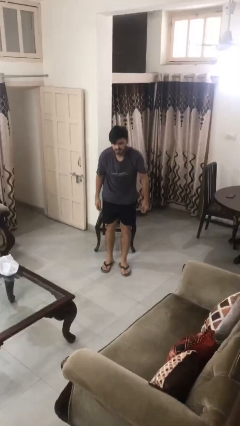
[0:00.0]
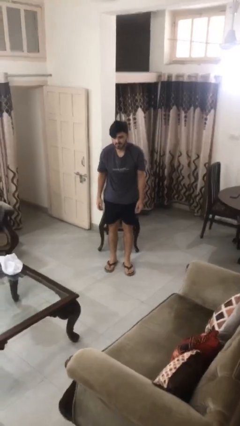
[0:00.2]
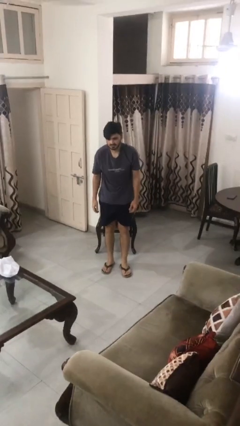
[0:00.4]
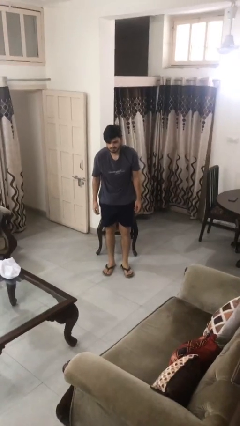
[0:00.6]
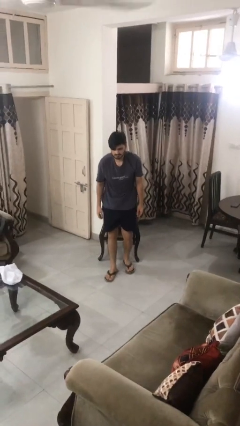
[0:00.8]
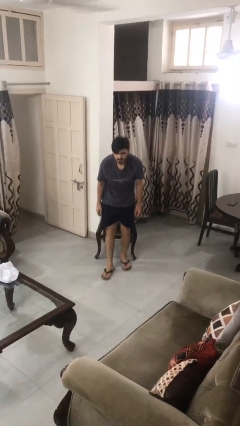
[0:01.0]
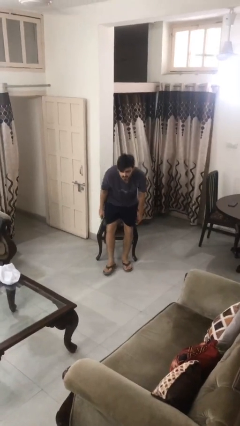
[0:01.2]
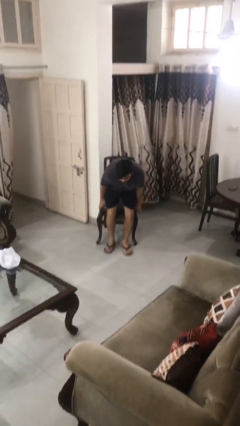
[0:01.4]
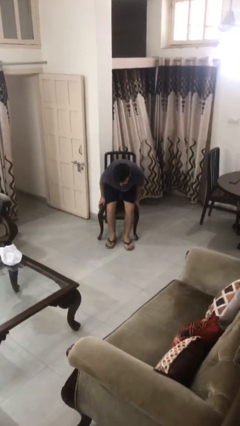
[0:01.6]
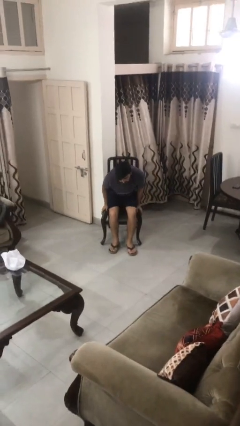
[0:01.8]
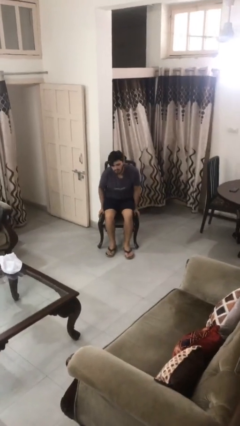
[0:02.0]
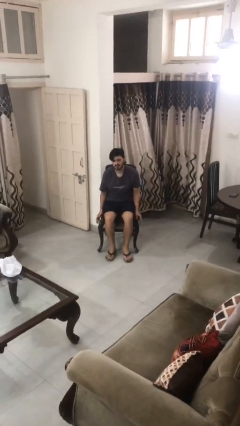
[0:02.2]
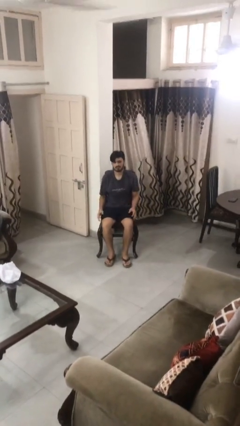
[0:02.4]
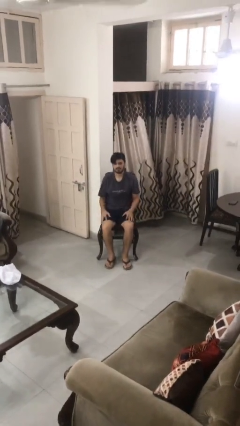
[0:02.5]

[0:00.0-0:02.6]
person sits down

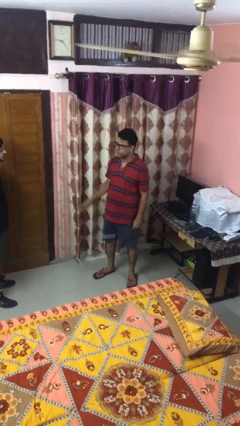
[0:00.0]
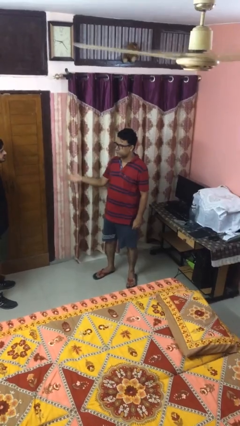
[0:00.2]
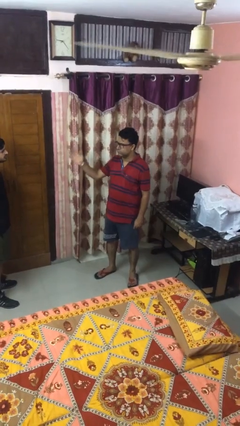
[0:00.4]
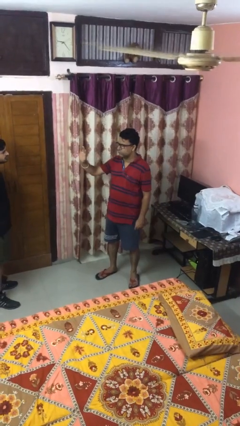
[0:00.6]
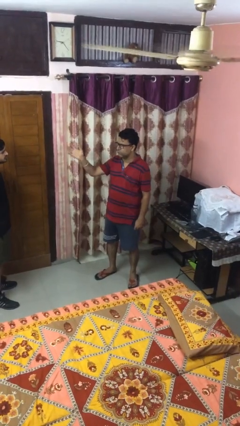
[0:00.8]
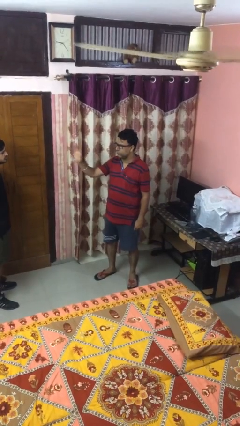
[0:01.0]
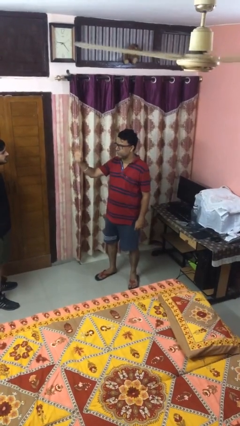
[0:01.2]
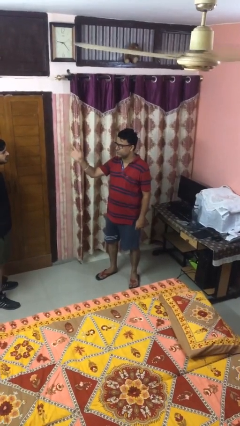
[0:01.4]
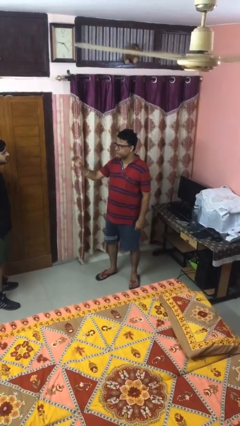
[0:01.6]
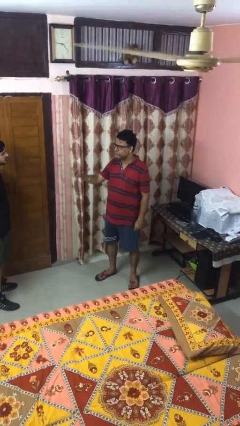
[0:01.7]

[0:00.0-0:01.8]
person waves at person

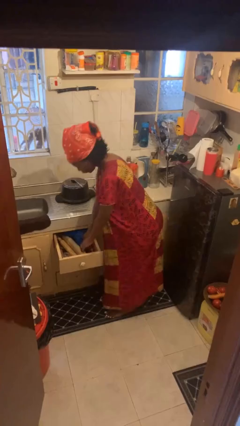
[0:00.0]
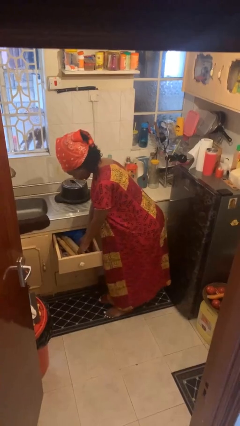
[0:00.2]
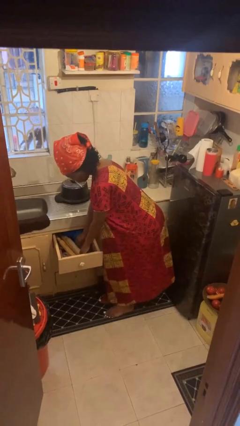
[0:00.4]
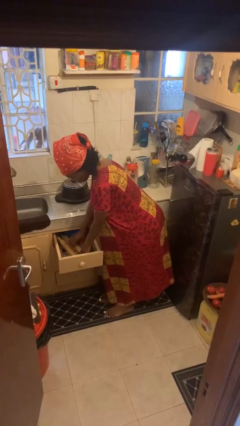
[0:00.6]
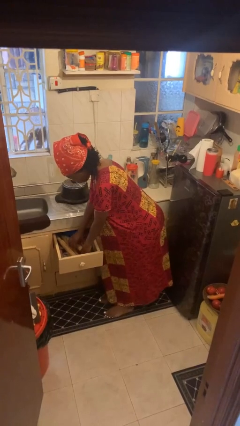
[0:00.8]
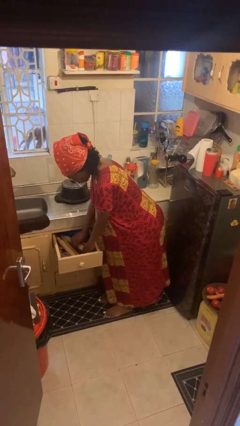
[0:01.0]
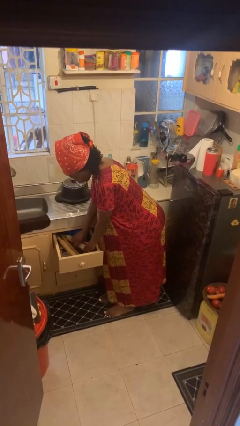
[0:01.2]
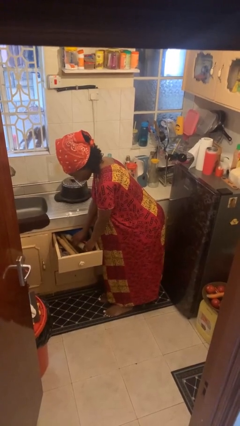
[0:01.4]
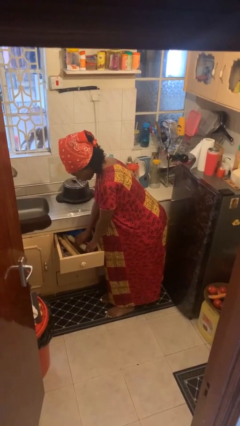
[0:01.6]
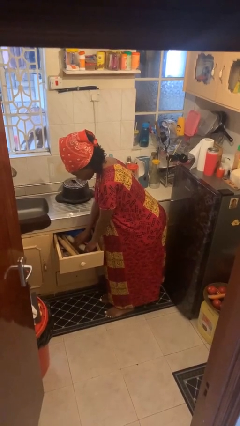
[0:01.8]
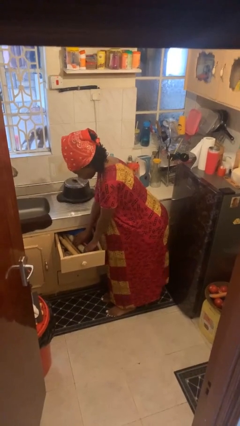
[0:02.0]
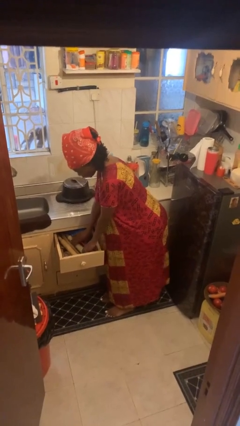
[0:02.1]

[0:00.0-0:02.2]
person searches in kitchen drawer

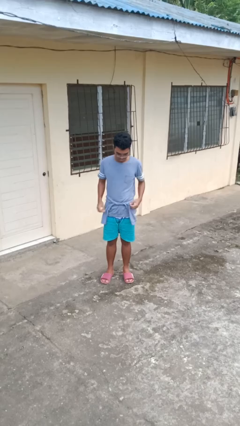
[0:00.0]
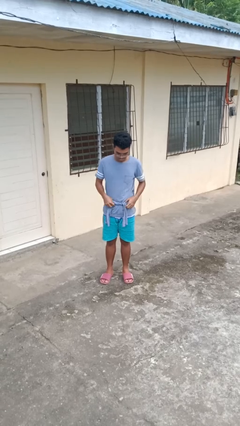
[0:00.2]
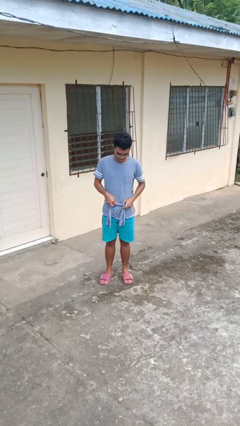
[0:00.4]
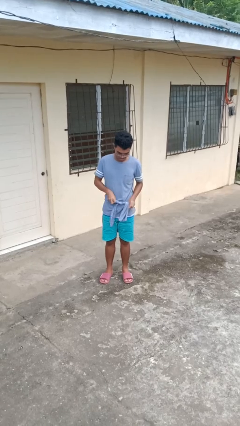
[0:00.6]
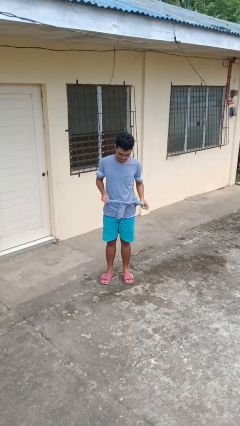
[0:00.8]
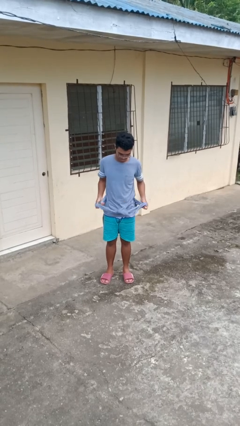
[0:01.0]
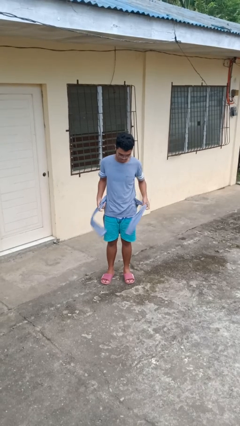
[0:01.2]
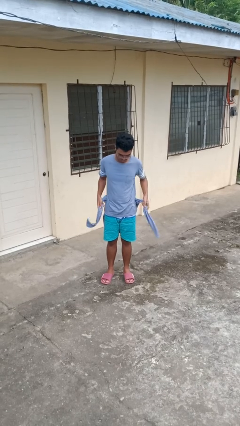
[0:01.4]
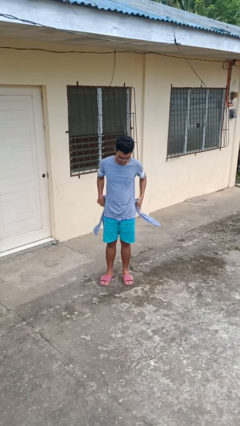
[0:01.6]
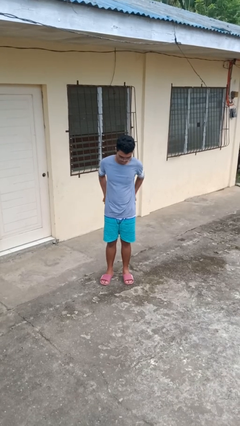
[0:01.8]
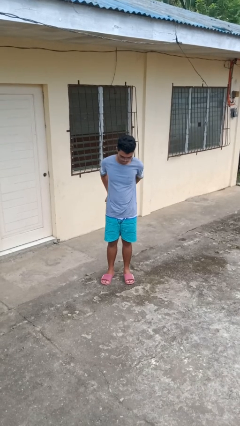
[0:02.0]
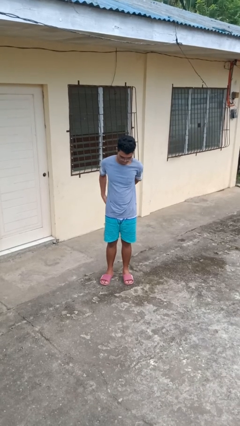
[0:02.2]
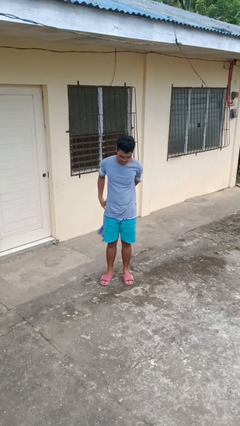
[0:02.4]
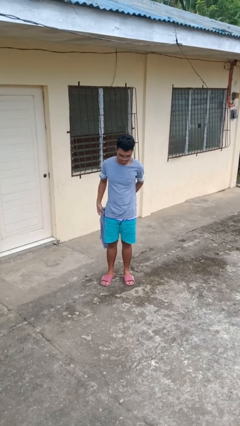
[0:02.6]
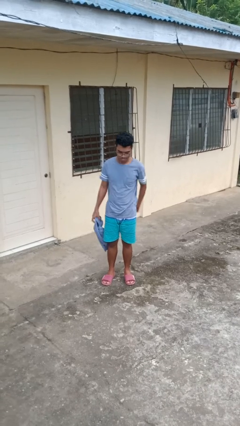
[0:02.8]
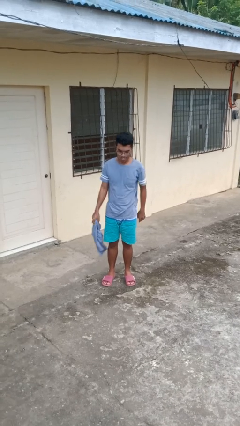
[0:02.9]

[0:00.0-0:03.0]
person unties jacket around waist

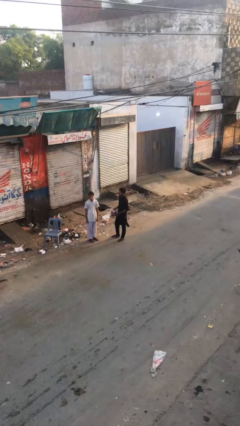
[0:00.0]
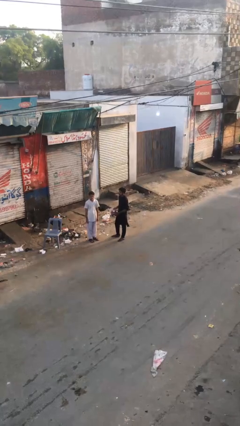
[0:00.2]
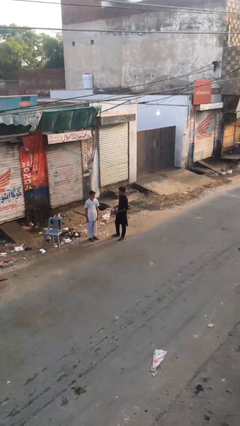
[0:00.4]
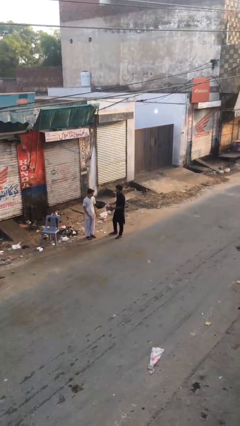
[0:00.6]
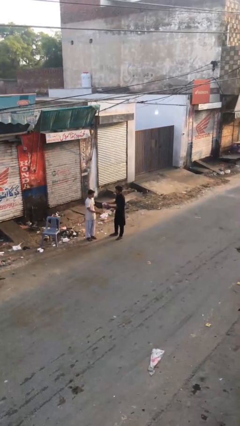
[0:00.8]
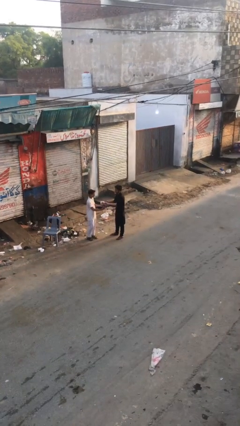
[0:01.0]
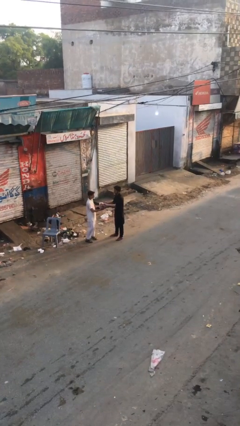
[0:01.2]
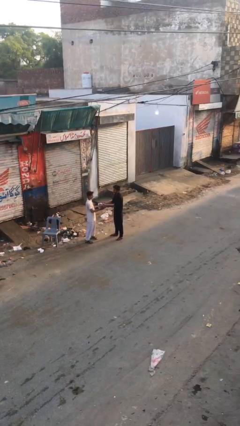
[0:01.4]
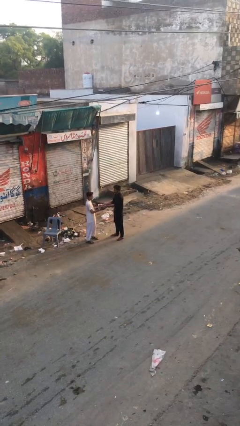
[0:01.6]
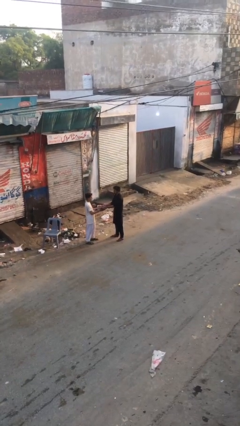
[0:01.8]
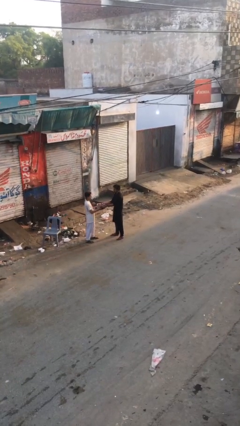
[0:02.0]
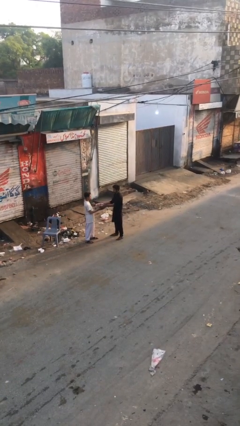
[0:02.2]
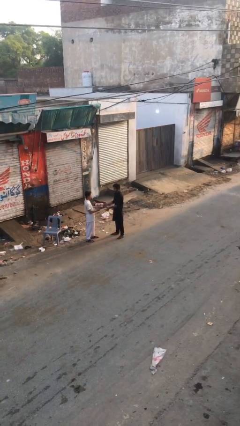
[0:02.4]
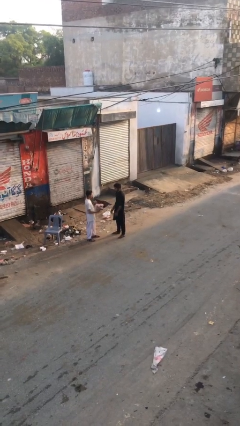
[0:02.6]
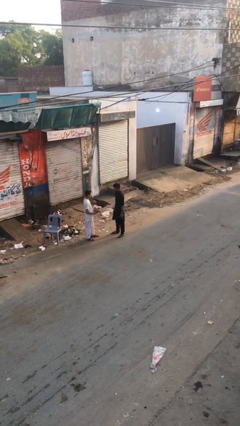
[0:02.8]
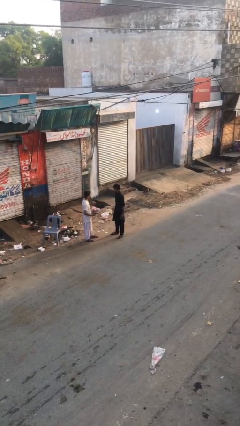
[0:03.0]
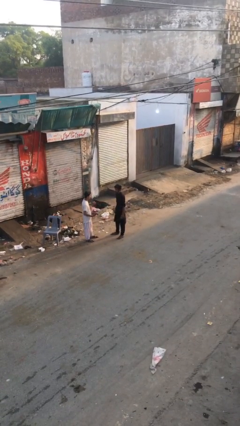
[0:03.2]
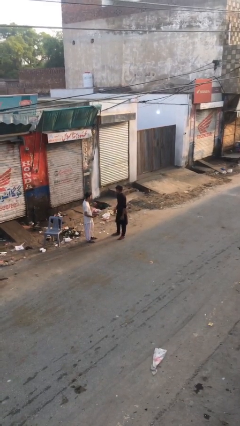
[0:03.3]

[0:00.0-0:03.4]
person transfers object to person

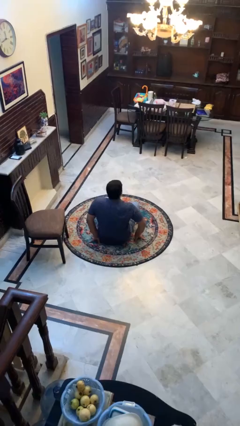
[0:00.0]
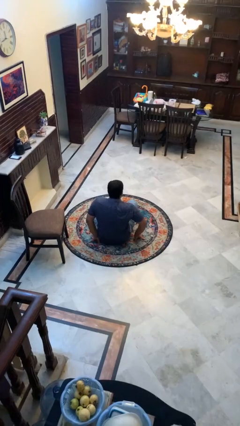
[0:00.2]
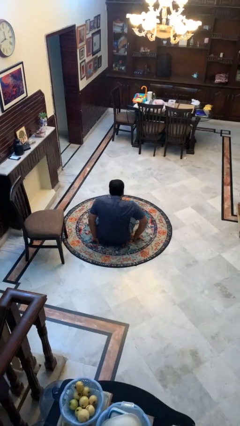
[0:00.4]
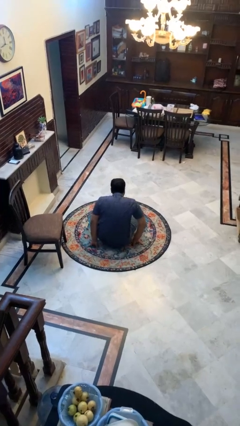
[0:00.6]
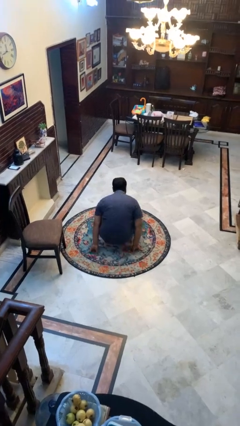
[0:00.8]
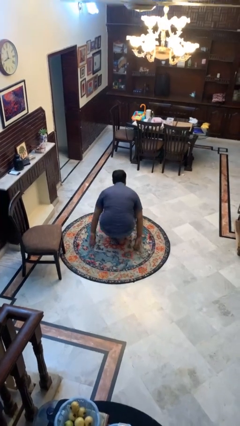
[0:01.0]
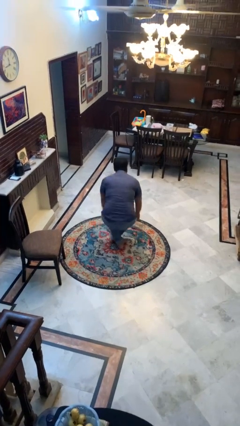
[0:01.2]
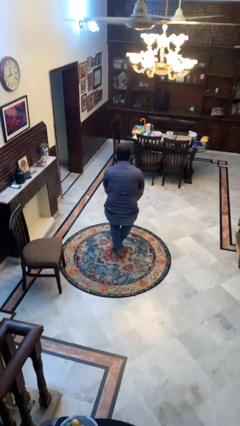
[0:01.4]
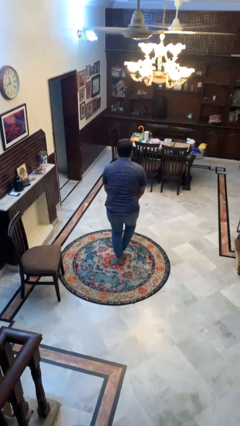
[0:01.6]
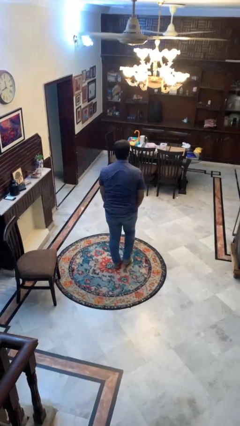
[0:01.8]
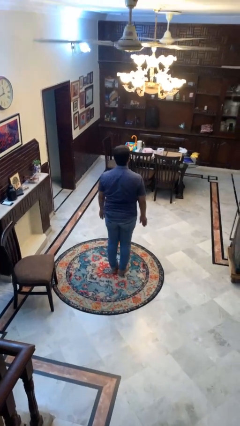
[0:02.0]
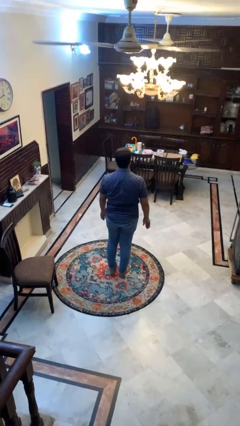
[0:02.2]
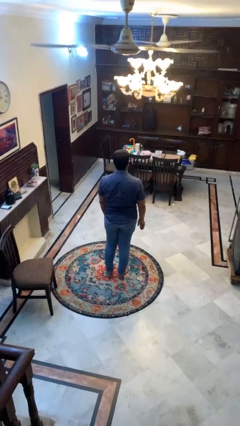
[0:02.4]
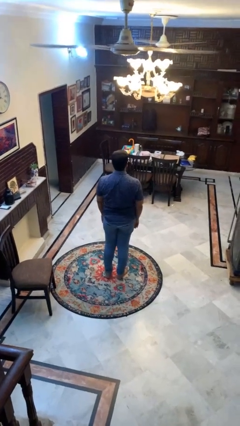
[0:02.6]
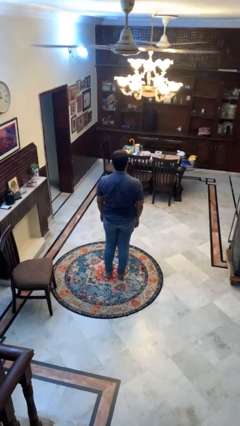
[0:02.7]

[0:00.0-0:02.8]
person stands up from floor

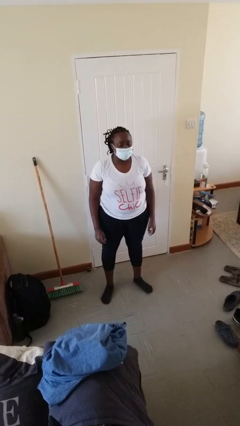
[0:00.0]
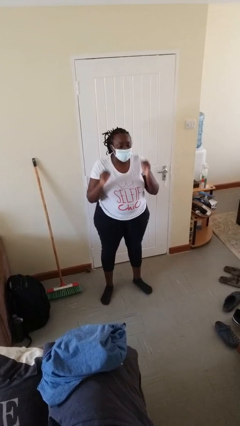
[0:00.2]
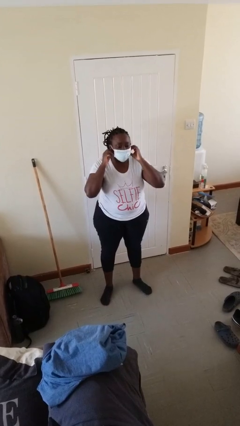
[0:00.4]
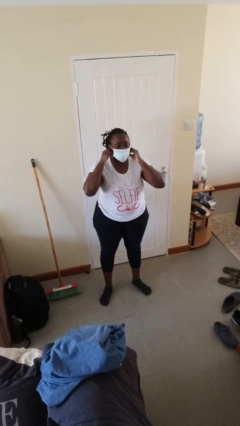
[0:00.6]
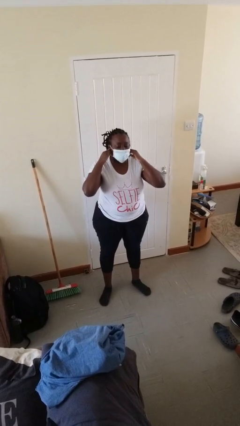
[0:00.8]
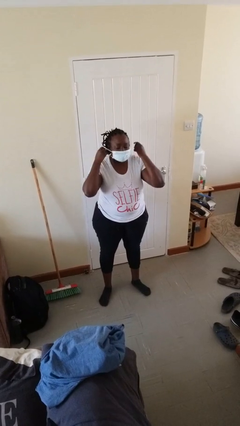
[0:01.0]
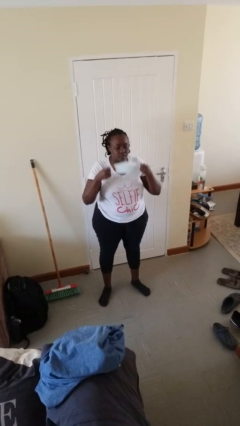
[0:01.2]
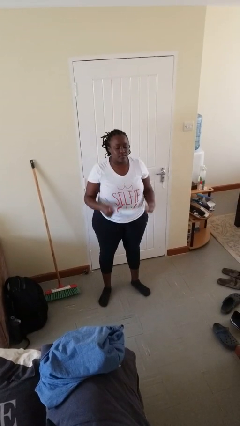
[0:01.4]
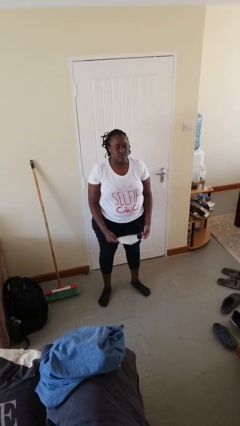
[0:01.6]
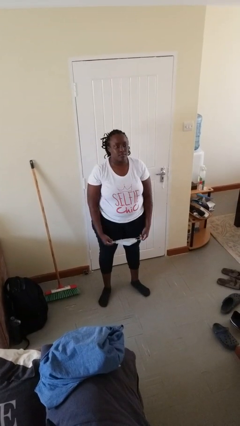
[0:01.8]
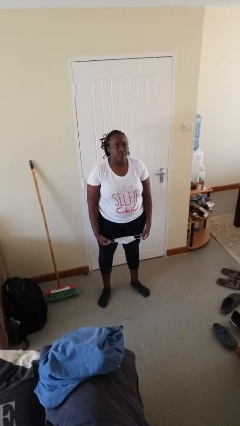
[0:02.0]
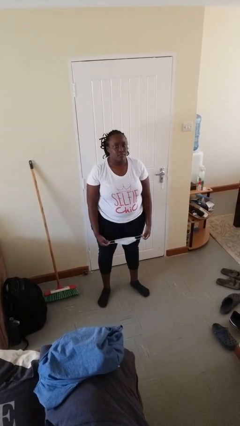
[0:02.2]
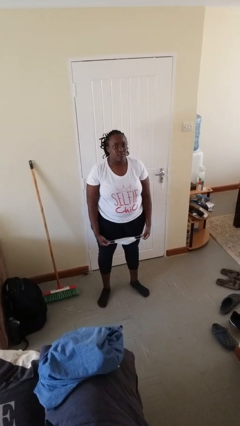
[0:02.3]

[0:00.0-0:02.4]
person takes off facemask
